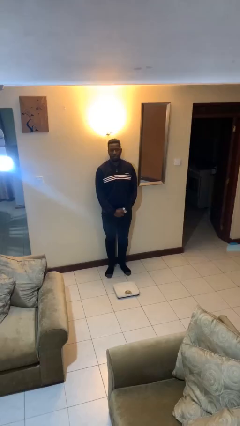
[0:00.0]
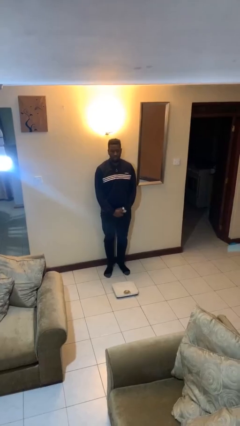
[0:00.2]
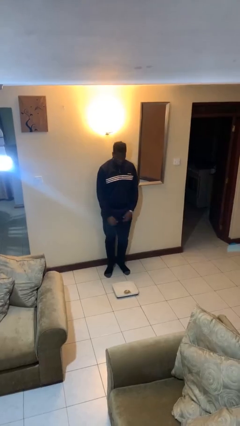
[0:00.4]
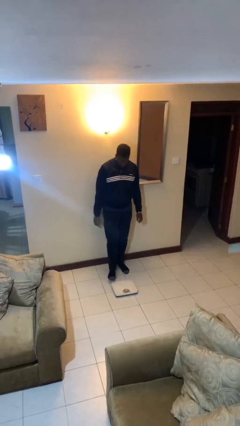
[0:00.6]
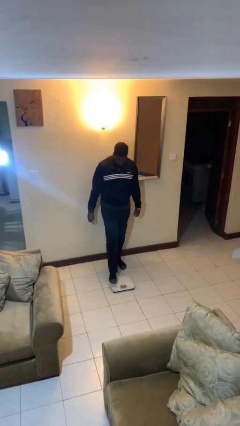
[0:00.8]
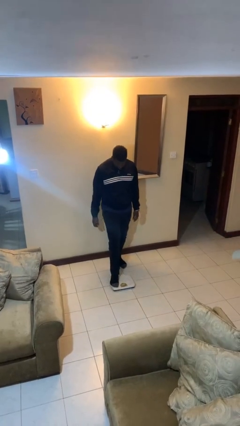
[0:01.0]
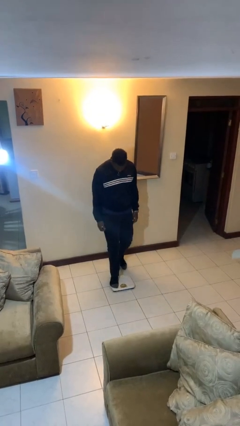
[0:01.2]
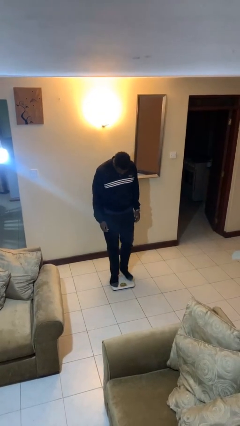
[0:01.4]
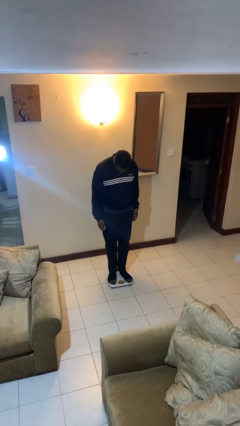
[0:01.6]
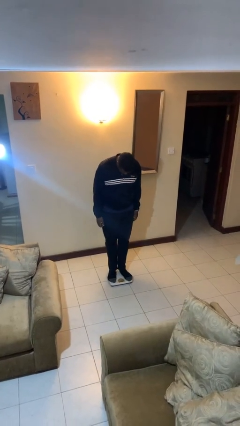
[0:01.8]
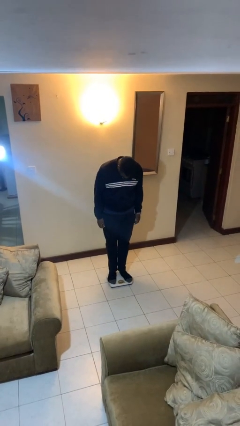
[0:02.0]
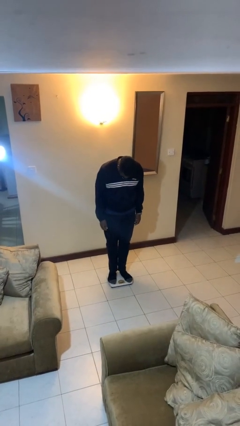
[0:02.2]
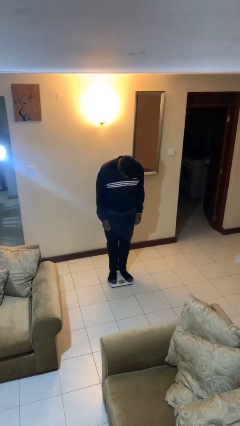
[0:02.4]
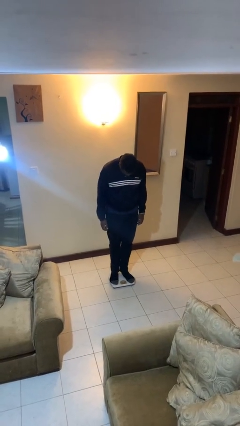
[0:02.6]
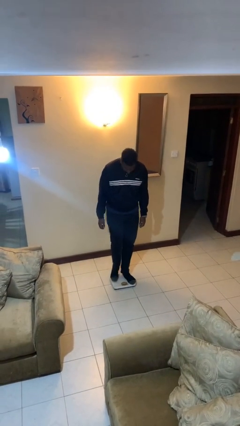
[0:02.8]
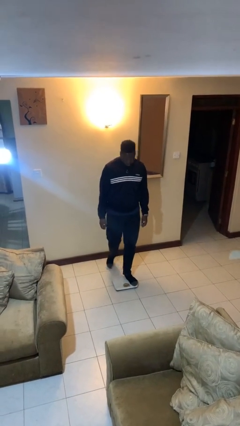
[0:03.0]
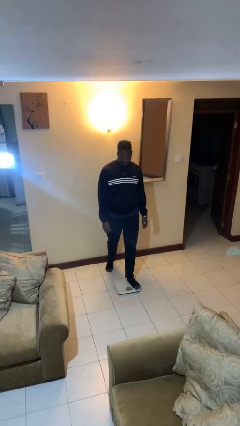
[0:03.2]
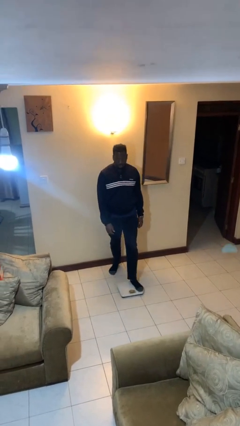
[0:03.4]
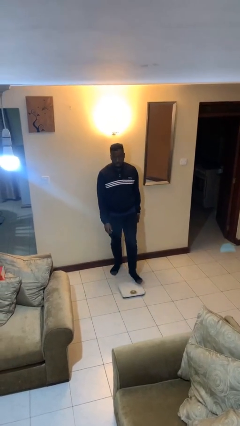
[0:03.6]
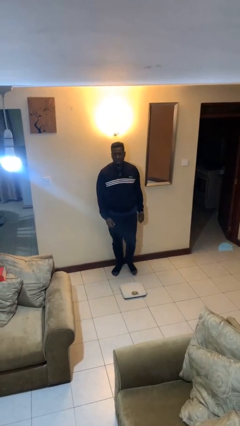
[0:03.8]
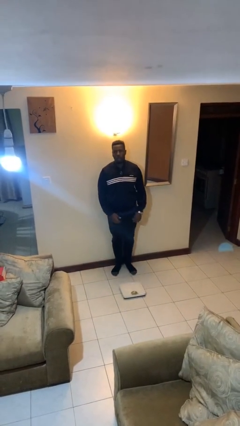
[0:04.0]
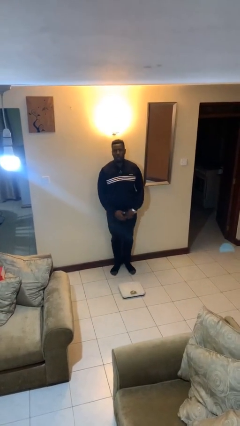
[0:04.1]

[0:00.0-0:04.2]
person uses bodyweight scale

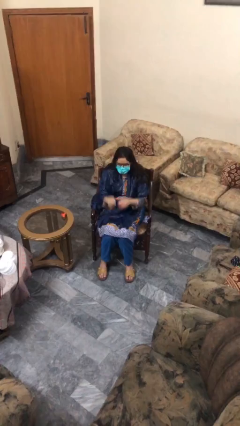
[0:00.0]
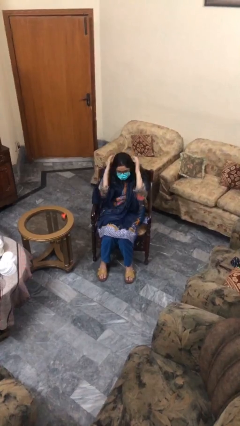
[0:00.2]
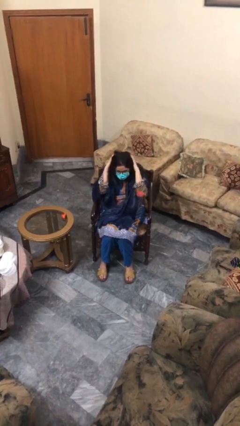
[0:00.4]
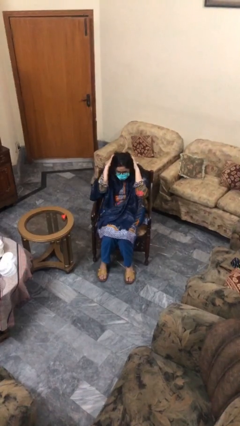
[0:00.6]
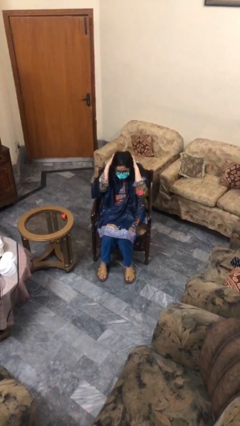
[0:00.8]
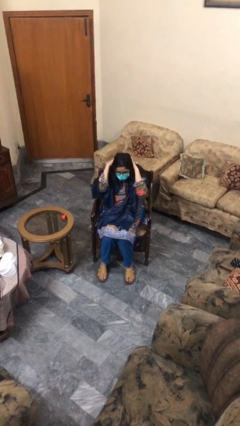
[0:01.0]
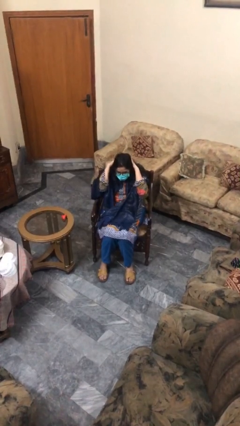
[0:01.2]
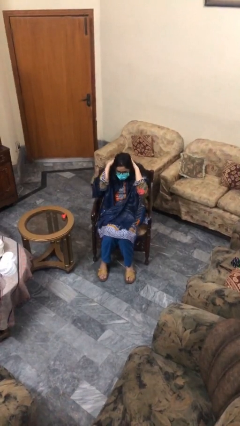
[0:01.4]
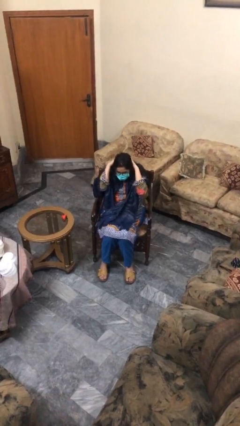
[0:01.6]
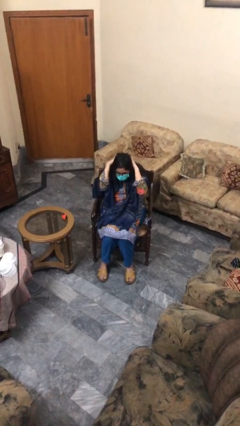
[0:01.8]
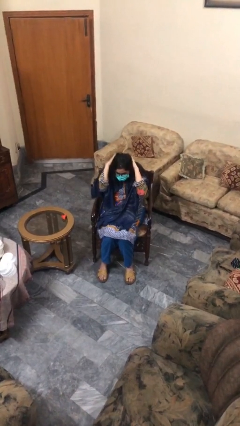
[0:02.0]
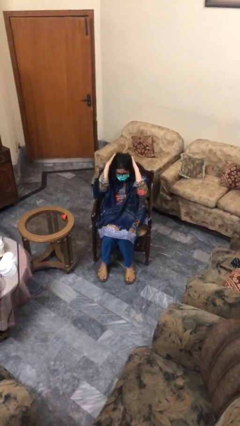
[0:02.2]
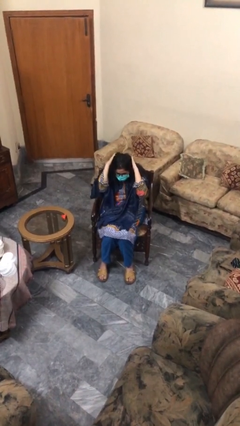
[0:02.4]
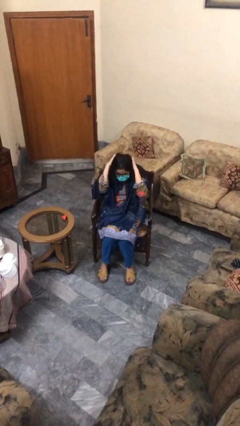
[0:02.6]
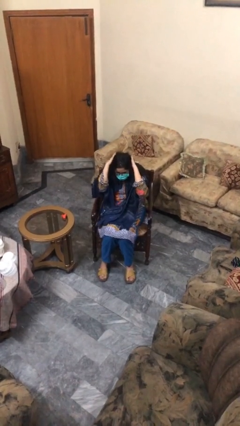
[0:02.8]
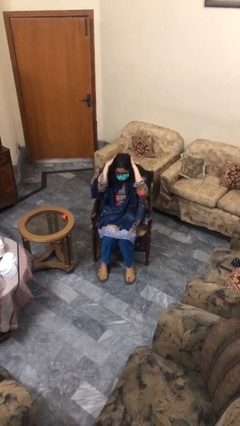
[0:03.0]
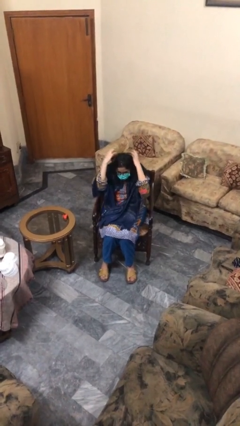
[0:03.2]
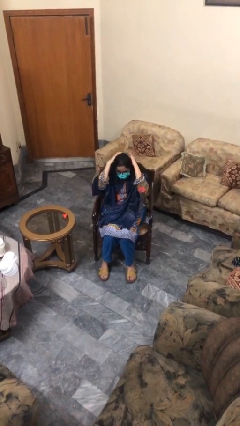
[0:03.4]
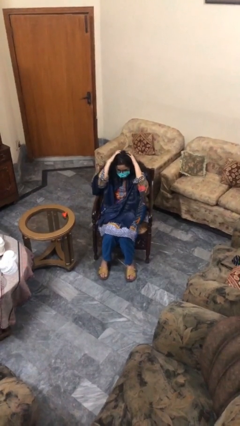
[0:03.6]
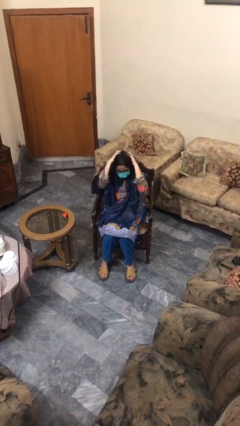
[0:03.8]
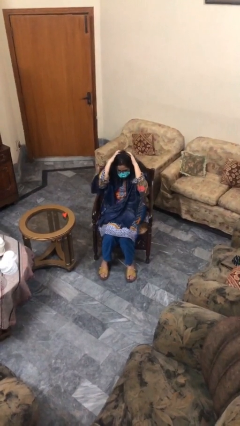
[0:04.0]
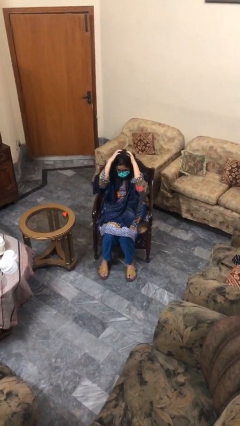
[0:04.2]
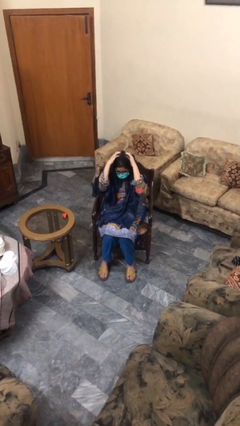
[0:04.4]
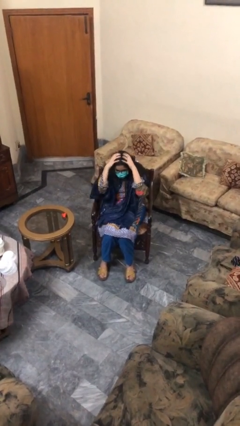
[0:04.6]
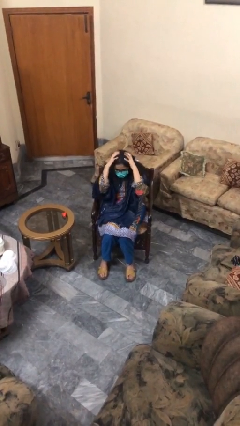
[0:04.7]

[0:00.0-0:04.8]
person pats head

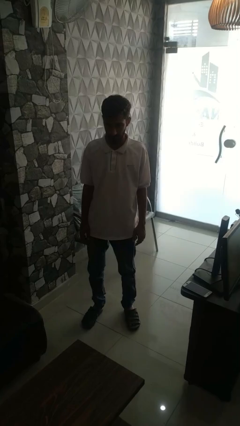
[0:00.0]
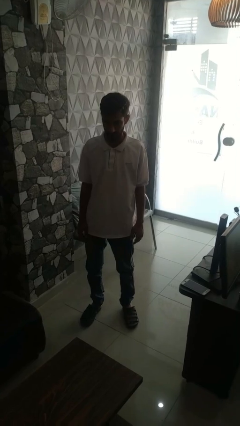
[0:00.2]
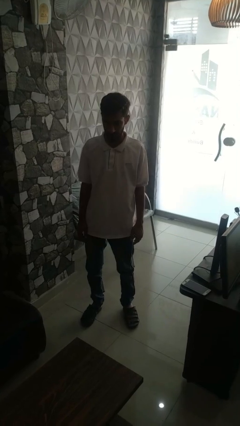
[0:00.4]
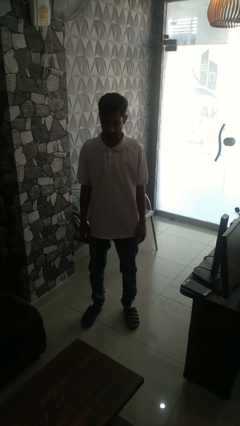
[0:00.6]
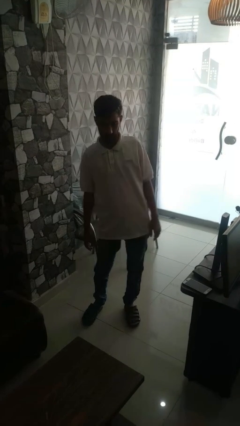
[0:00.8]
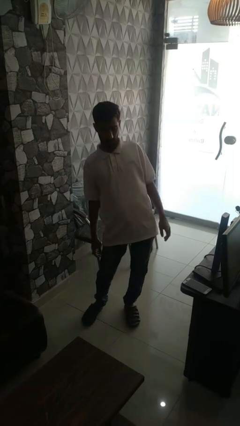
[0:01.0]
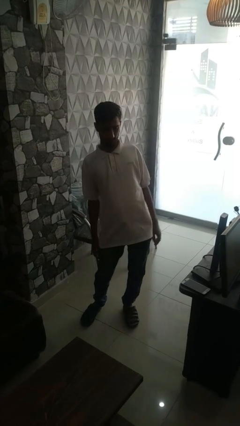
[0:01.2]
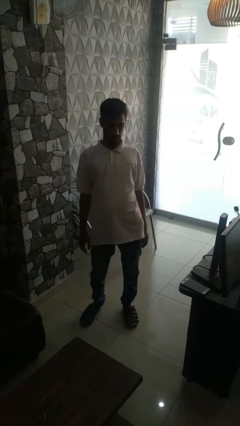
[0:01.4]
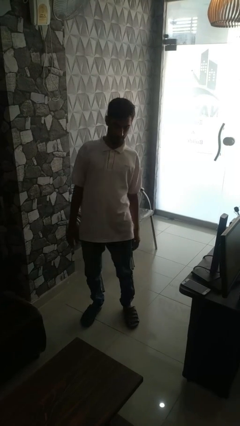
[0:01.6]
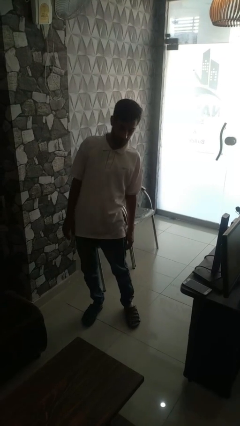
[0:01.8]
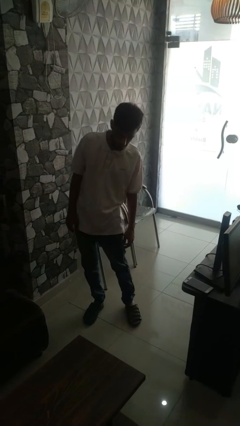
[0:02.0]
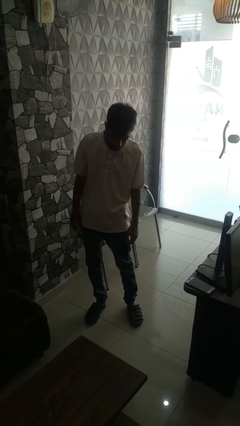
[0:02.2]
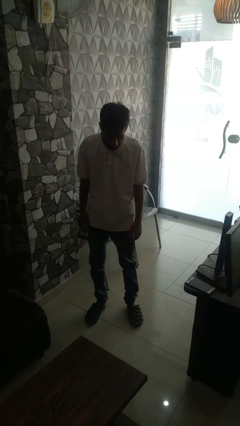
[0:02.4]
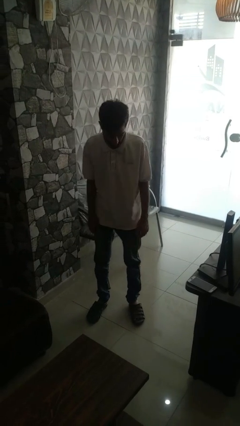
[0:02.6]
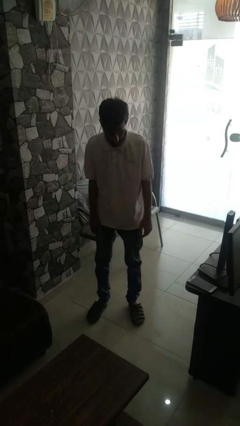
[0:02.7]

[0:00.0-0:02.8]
person wiggles hips

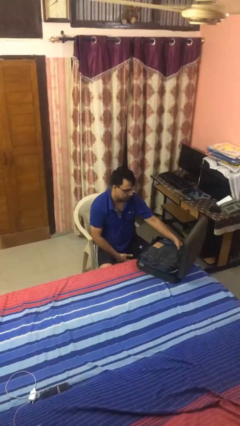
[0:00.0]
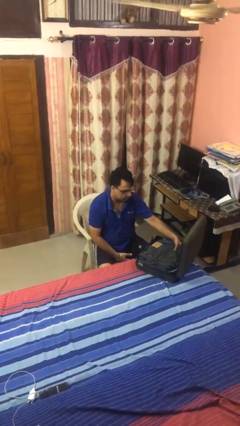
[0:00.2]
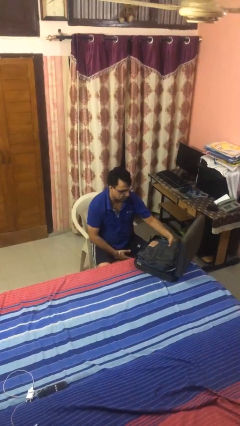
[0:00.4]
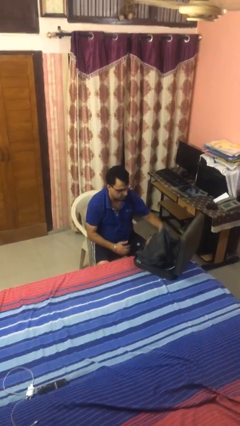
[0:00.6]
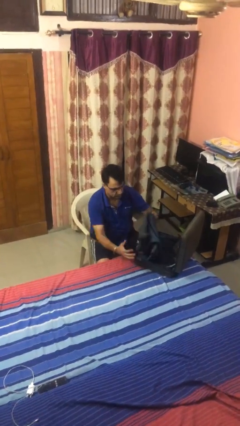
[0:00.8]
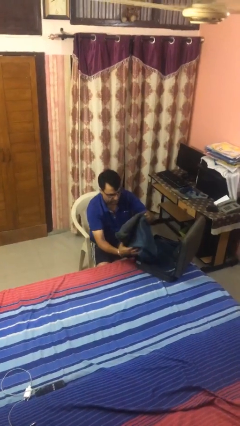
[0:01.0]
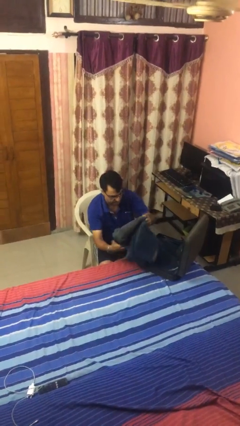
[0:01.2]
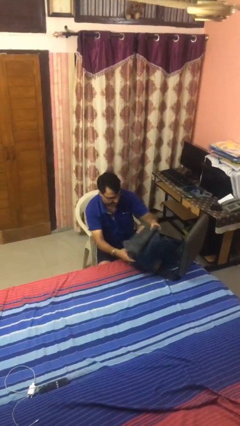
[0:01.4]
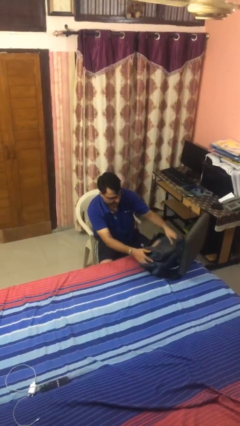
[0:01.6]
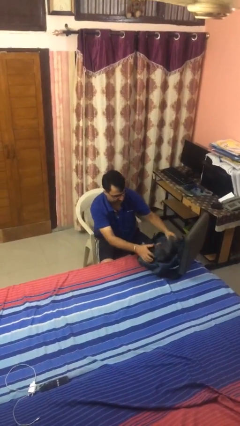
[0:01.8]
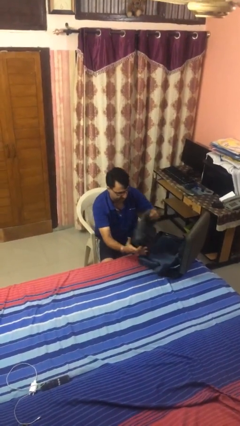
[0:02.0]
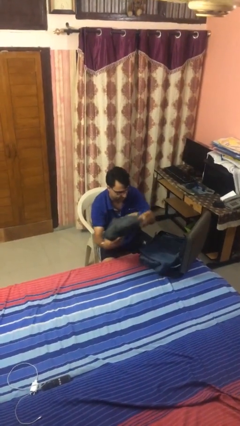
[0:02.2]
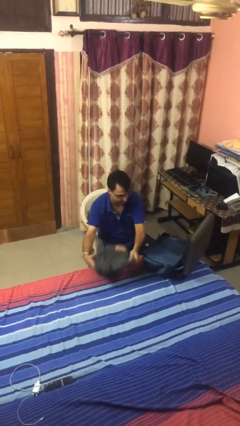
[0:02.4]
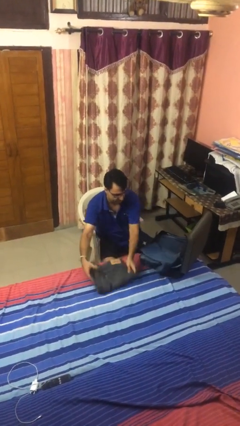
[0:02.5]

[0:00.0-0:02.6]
person unloads clothes from suitcase

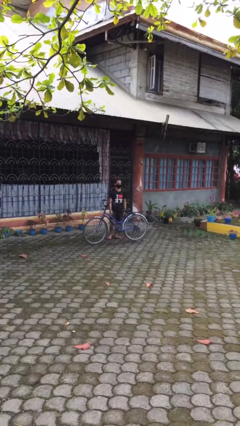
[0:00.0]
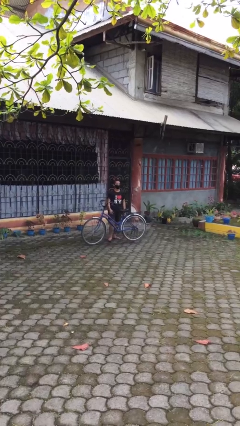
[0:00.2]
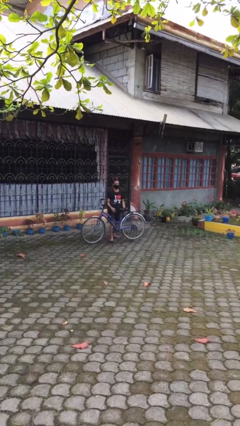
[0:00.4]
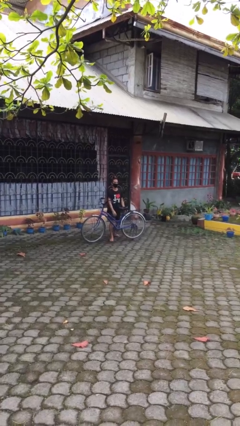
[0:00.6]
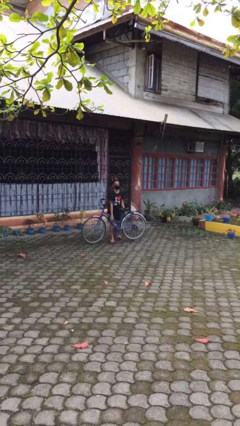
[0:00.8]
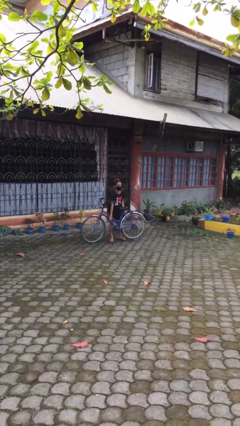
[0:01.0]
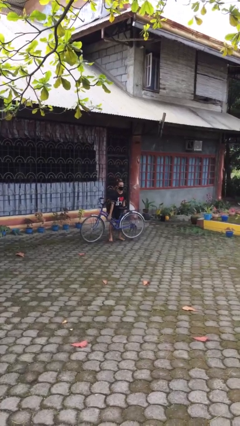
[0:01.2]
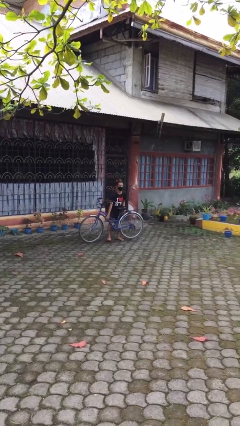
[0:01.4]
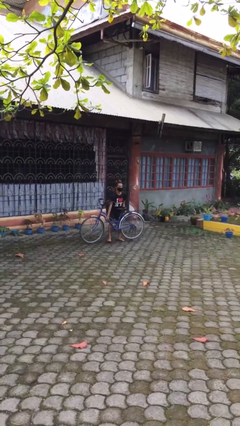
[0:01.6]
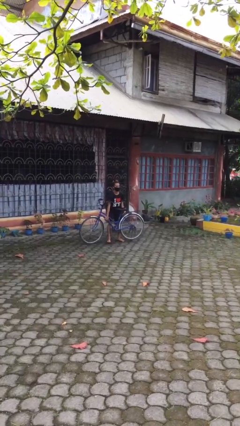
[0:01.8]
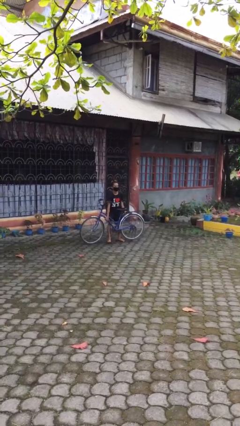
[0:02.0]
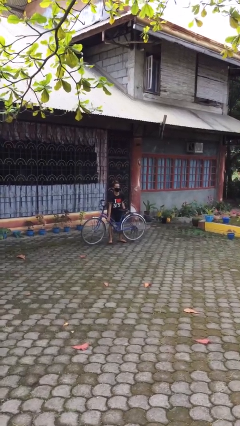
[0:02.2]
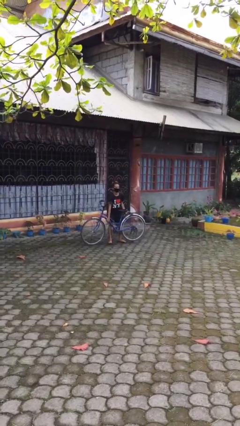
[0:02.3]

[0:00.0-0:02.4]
person picks up object from floor

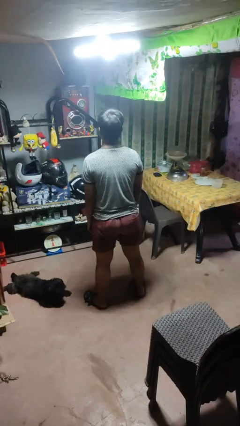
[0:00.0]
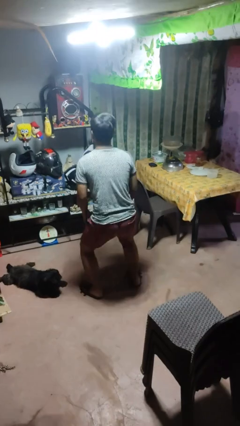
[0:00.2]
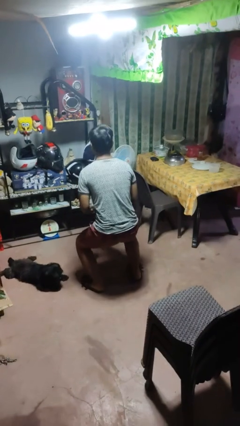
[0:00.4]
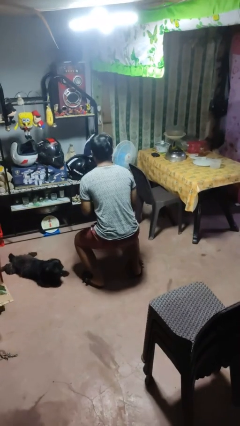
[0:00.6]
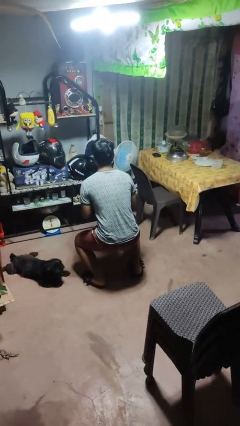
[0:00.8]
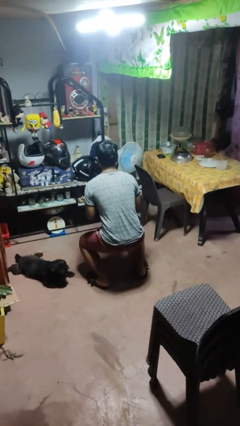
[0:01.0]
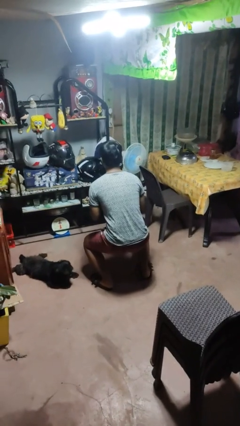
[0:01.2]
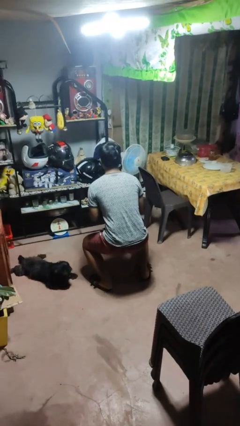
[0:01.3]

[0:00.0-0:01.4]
person squats
